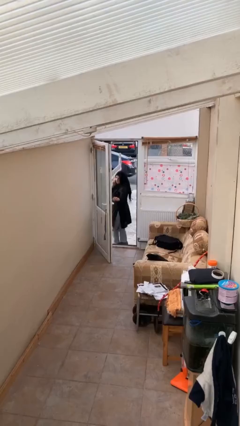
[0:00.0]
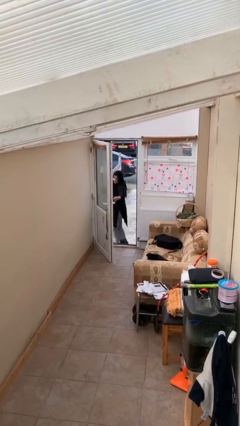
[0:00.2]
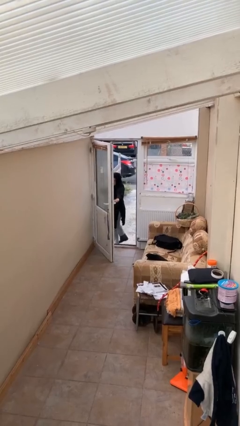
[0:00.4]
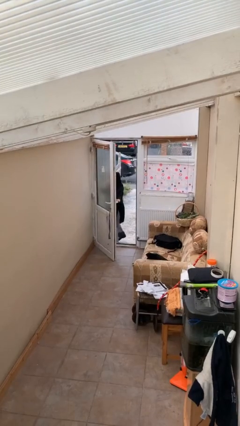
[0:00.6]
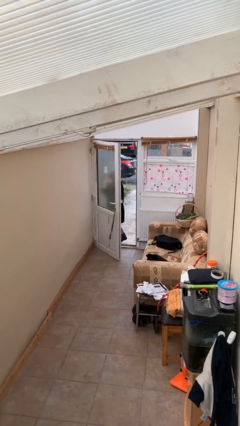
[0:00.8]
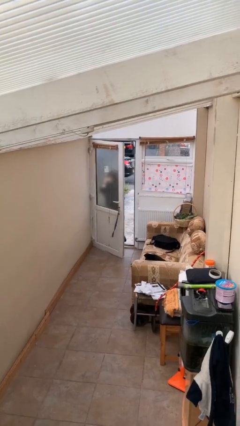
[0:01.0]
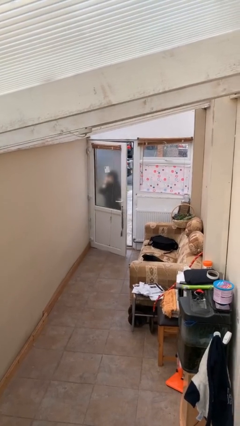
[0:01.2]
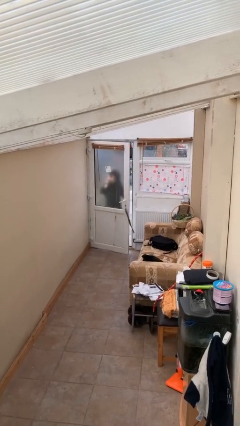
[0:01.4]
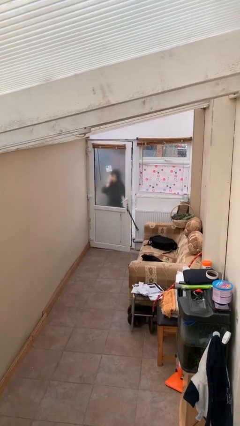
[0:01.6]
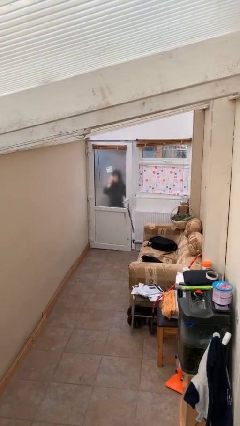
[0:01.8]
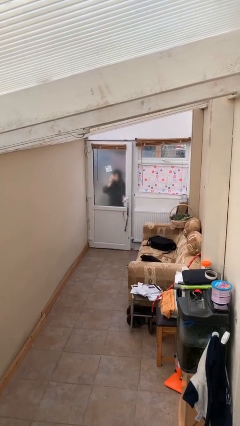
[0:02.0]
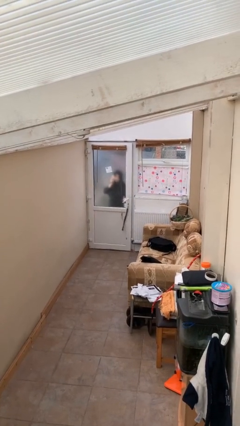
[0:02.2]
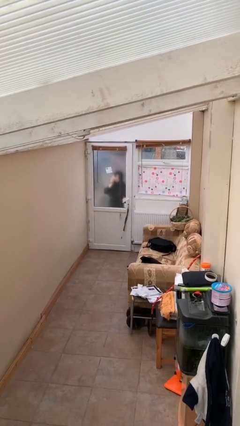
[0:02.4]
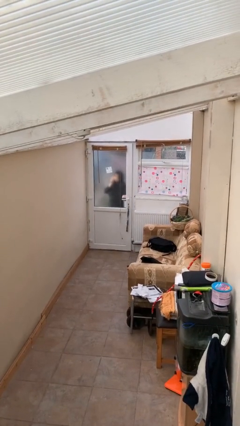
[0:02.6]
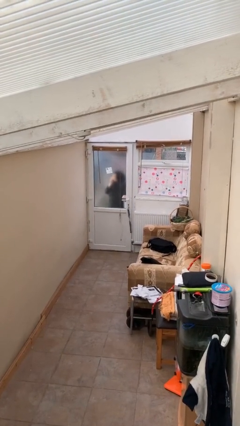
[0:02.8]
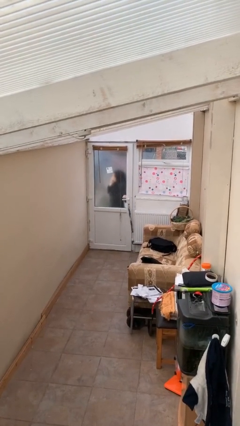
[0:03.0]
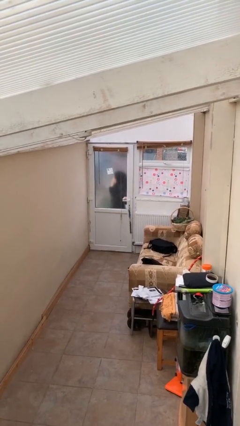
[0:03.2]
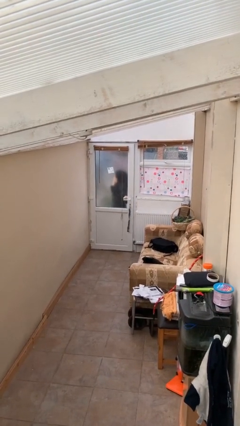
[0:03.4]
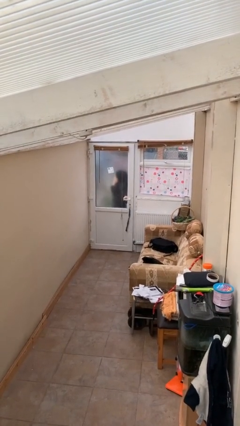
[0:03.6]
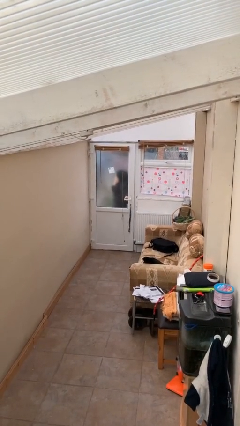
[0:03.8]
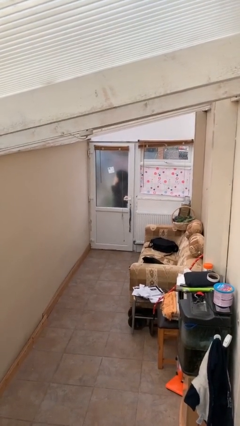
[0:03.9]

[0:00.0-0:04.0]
person closes facility door

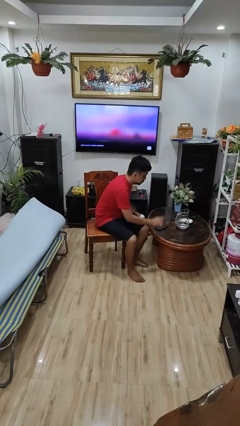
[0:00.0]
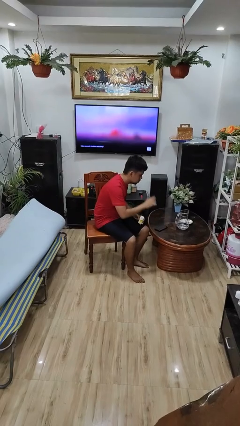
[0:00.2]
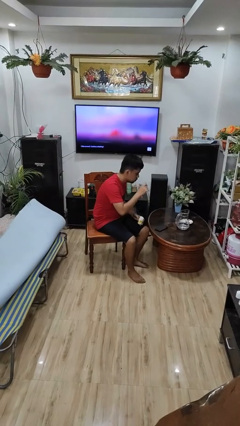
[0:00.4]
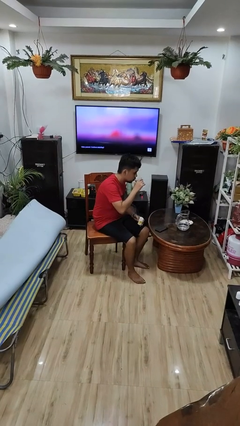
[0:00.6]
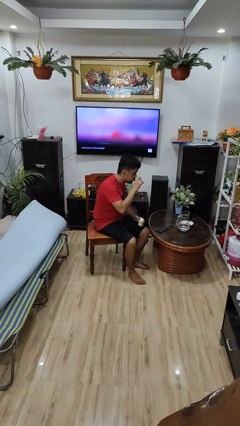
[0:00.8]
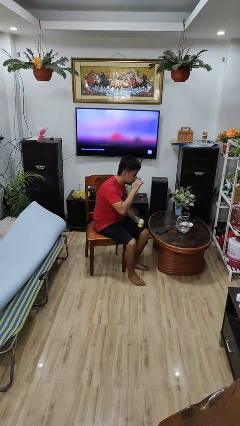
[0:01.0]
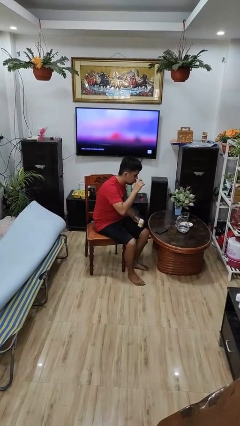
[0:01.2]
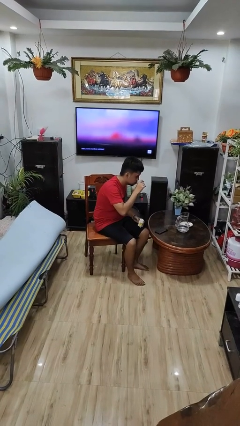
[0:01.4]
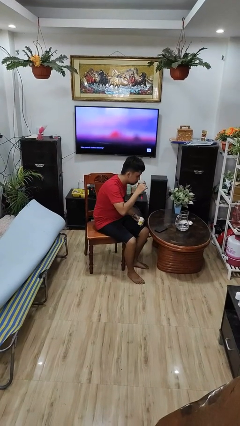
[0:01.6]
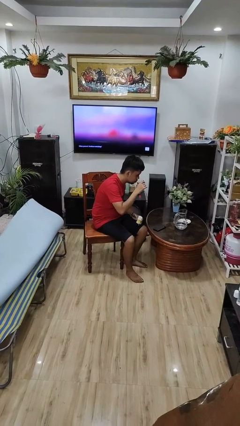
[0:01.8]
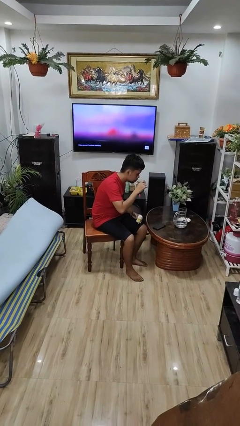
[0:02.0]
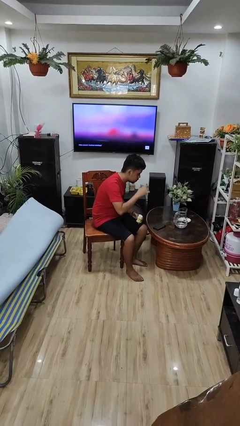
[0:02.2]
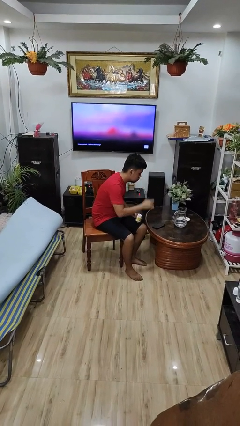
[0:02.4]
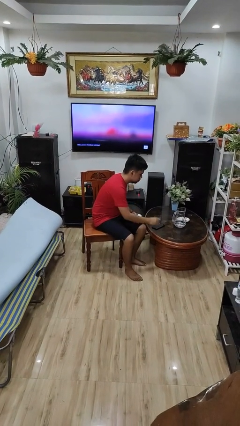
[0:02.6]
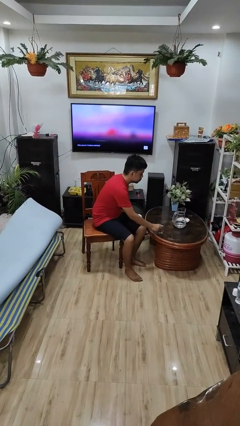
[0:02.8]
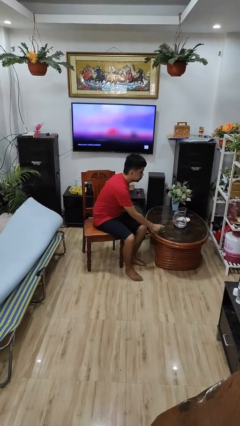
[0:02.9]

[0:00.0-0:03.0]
person drinks from cup

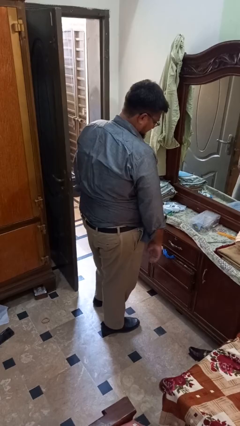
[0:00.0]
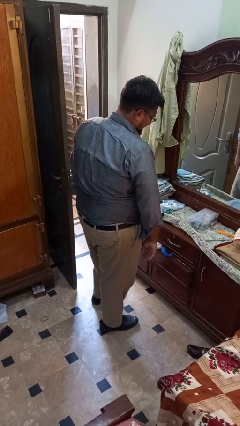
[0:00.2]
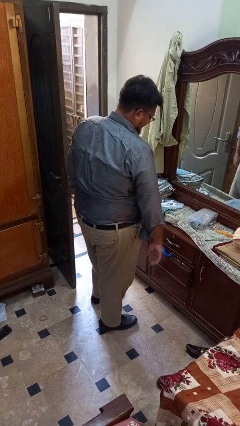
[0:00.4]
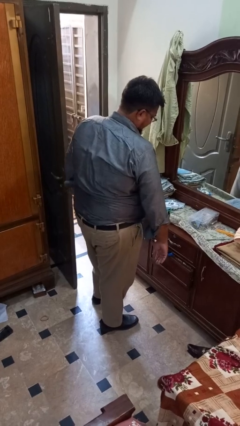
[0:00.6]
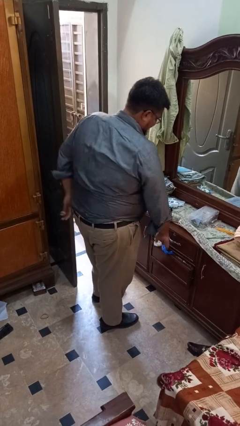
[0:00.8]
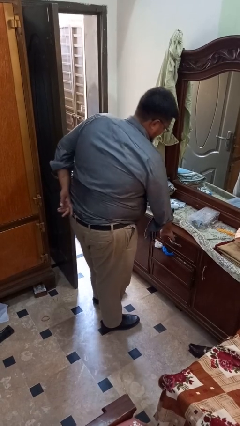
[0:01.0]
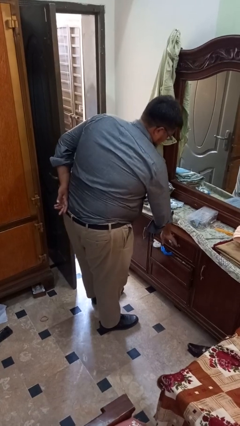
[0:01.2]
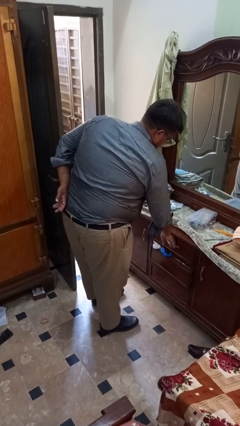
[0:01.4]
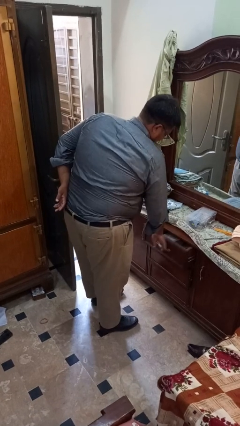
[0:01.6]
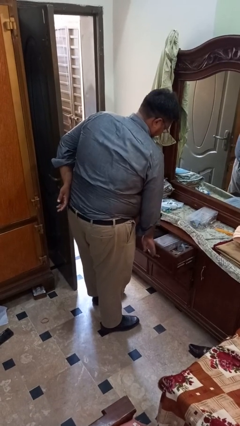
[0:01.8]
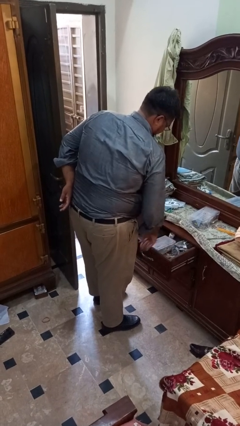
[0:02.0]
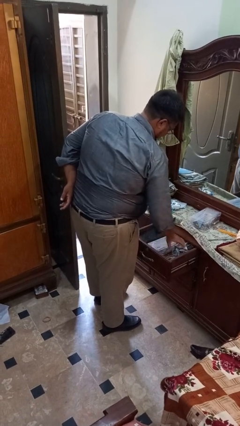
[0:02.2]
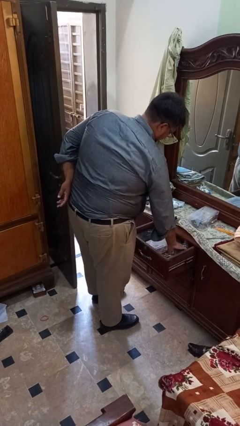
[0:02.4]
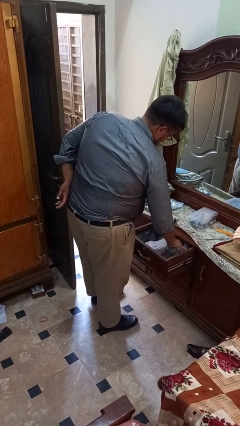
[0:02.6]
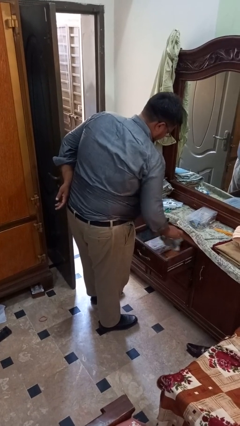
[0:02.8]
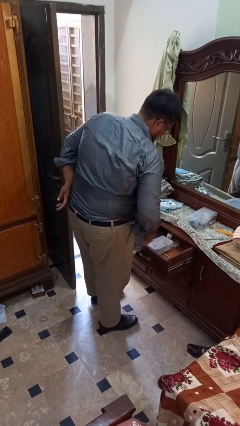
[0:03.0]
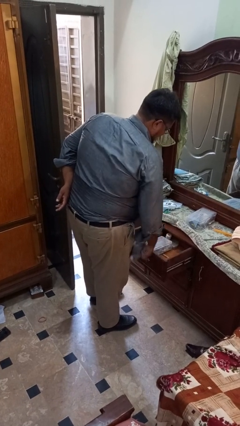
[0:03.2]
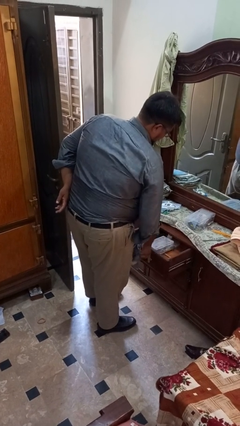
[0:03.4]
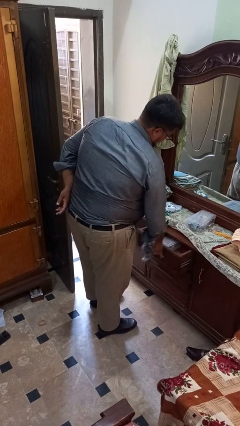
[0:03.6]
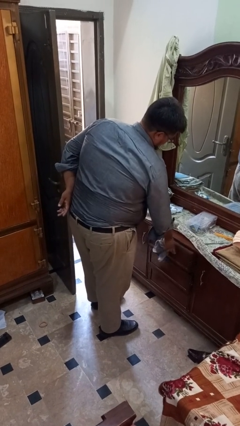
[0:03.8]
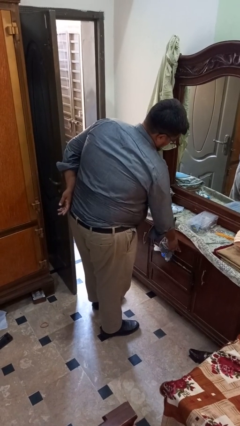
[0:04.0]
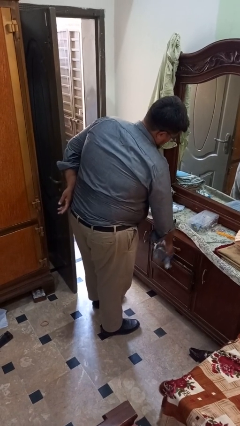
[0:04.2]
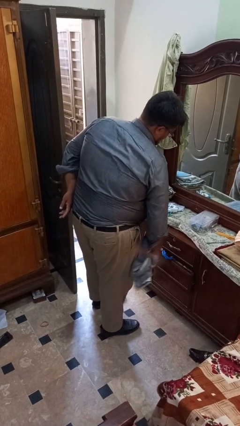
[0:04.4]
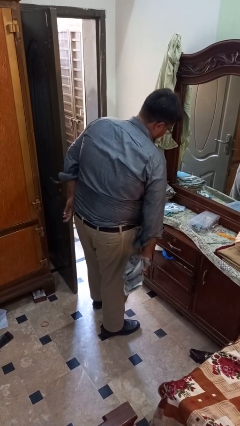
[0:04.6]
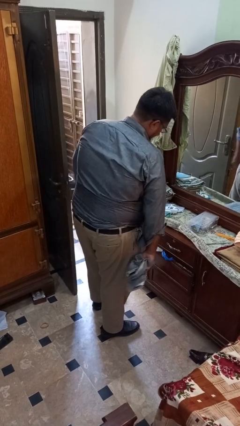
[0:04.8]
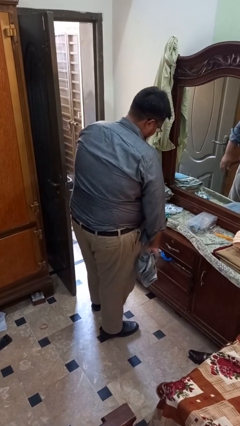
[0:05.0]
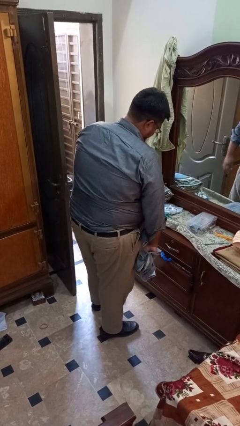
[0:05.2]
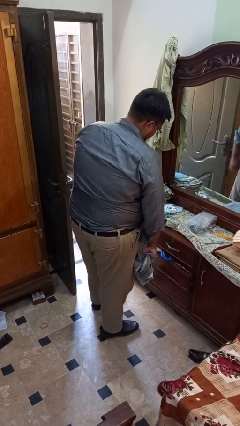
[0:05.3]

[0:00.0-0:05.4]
person takes clothes from dresser

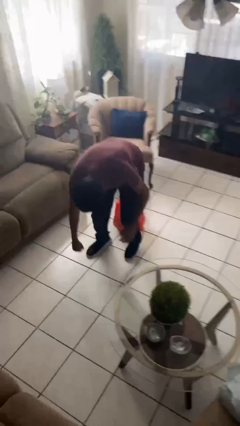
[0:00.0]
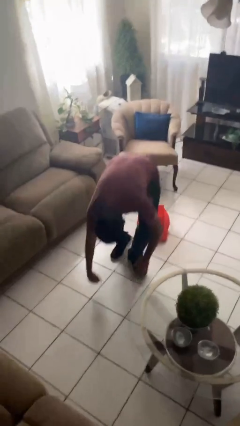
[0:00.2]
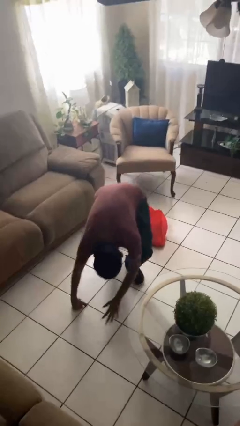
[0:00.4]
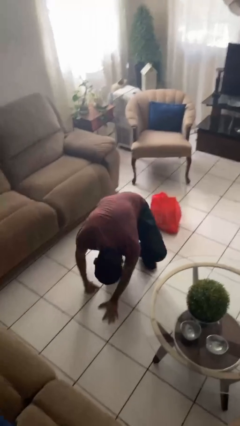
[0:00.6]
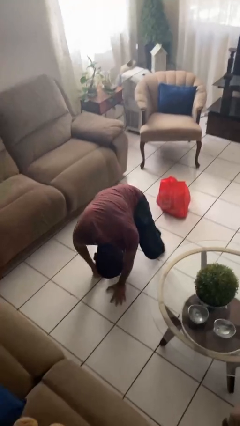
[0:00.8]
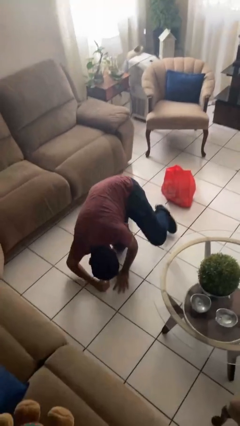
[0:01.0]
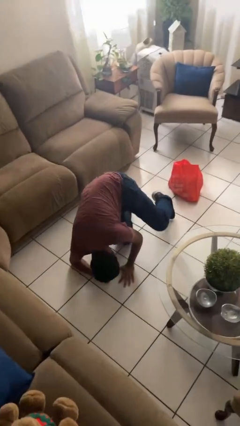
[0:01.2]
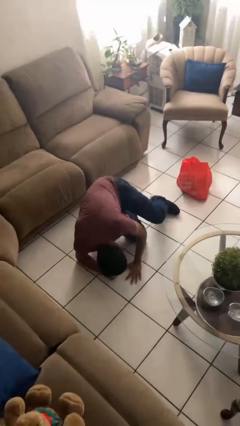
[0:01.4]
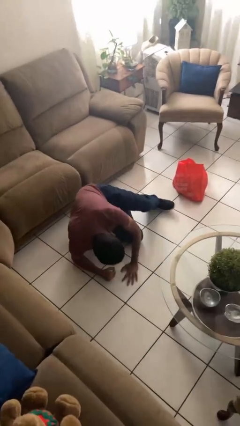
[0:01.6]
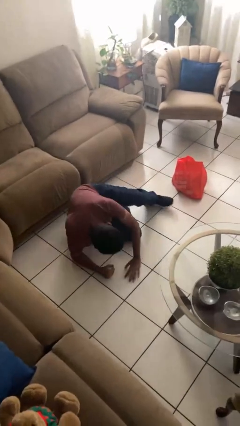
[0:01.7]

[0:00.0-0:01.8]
person lies down on floor

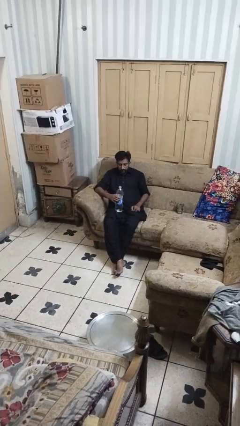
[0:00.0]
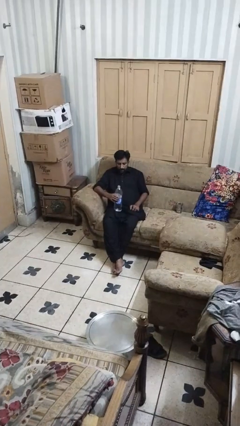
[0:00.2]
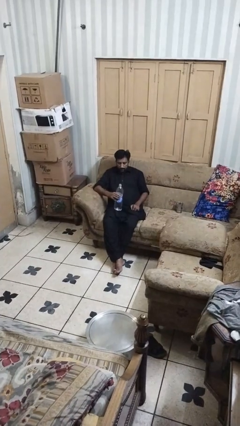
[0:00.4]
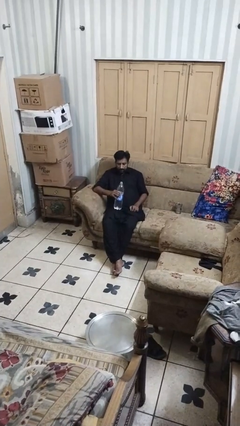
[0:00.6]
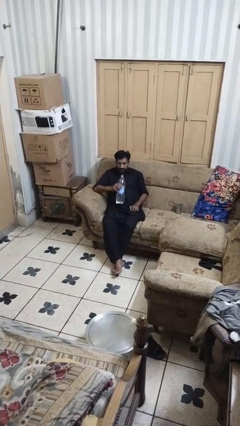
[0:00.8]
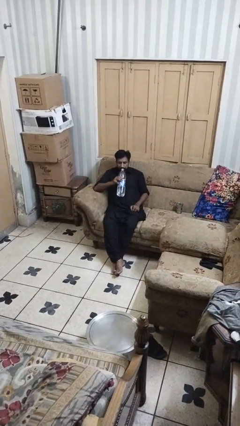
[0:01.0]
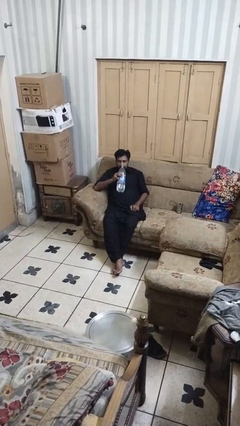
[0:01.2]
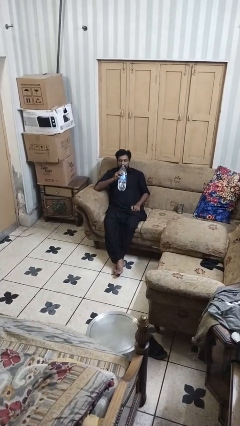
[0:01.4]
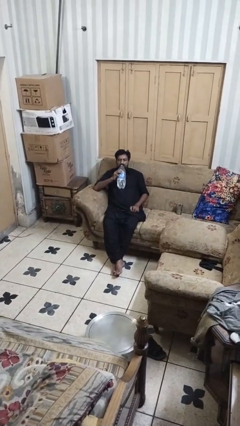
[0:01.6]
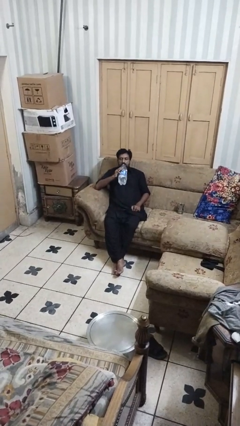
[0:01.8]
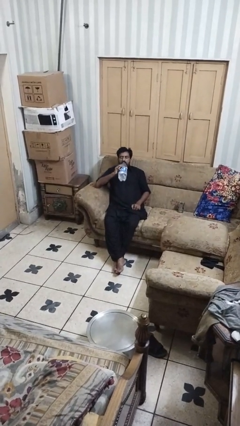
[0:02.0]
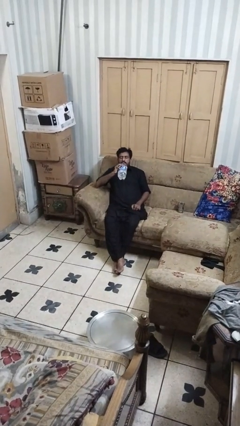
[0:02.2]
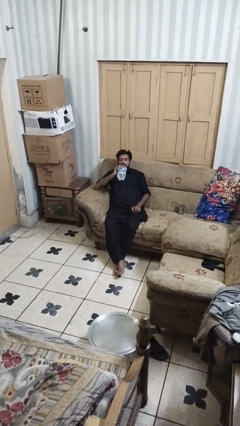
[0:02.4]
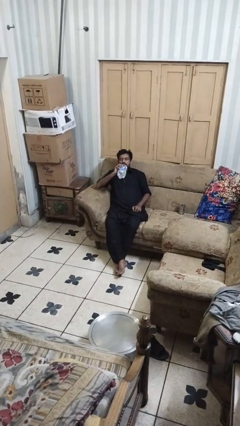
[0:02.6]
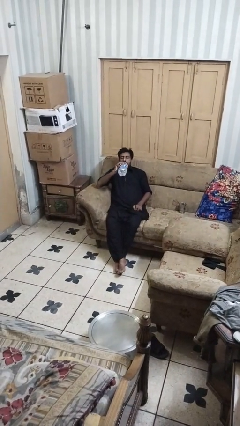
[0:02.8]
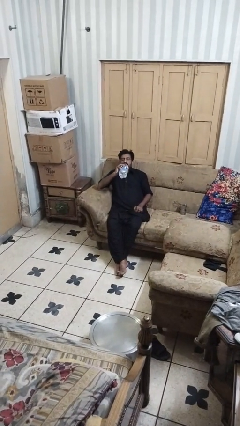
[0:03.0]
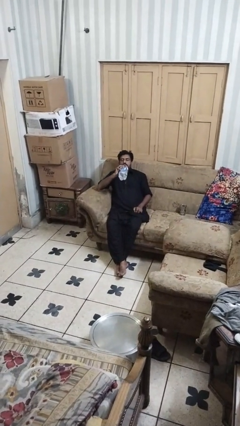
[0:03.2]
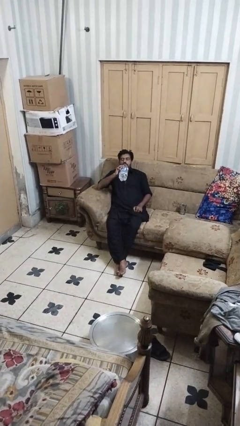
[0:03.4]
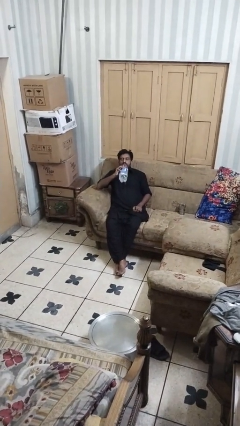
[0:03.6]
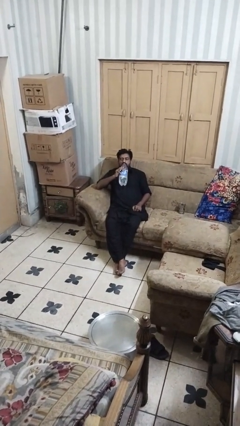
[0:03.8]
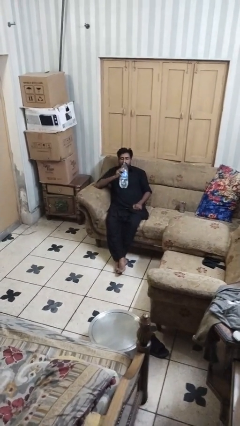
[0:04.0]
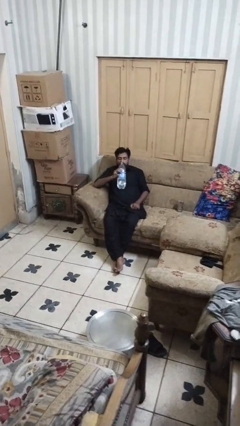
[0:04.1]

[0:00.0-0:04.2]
person drinks from bottle
